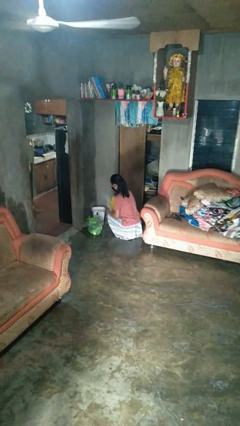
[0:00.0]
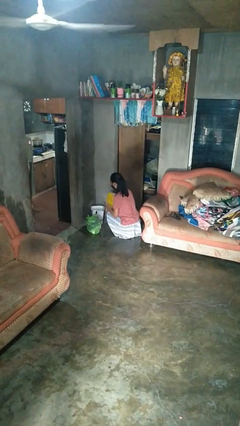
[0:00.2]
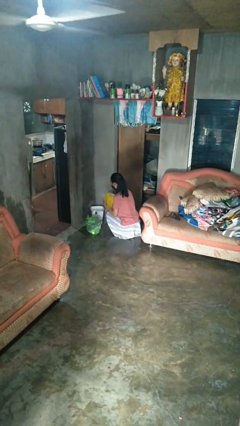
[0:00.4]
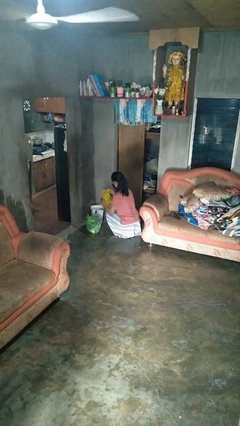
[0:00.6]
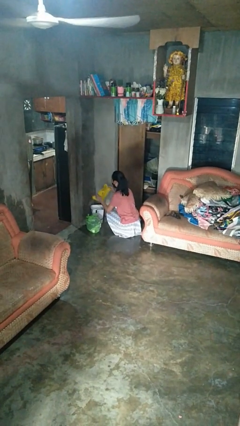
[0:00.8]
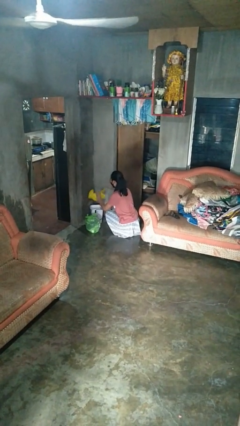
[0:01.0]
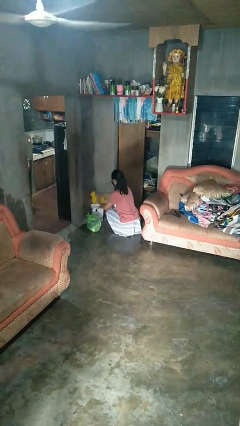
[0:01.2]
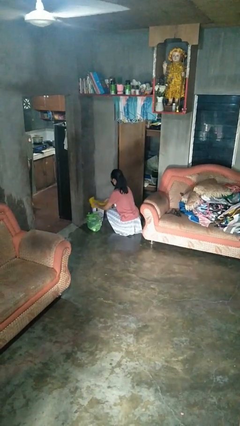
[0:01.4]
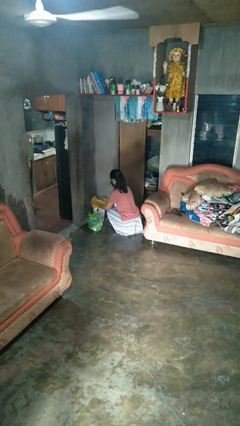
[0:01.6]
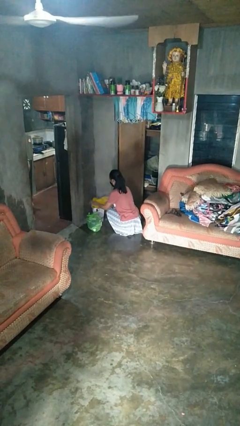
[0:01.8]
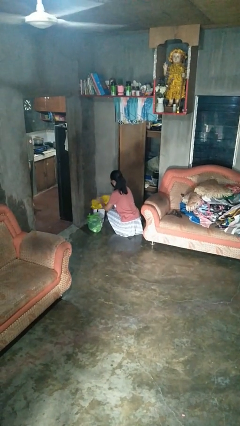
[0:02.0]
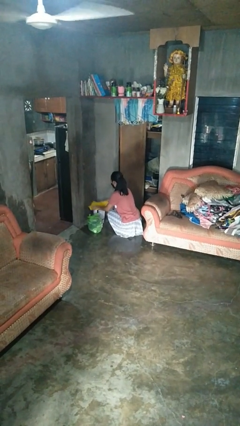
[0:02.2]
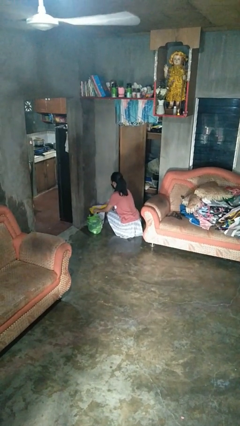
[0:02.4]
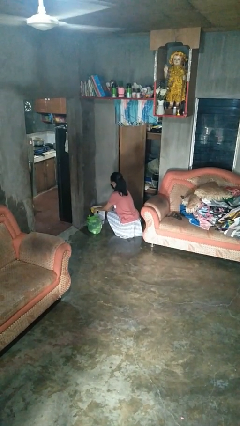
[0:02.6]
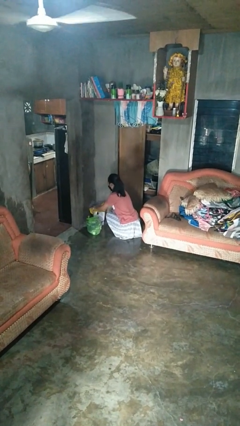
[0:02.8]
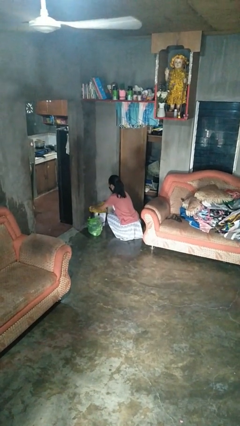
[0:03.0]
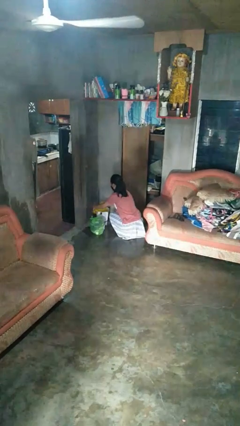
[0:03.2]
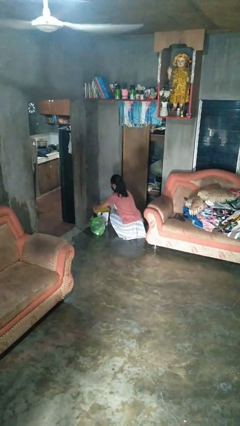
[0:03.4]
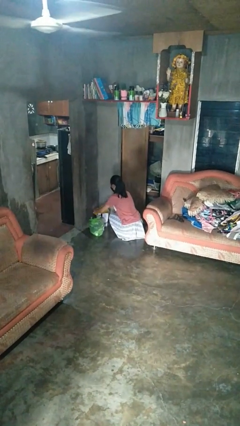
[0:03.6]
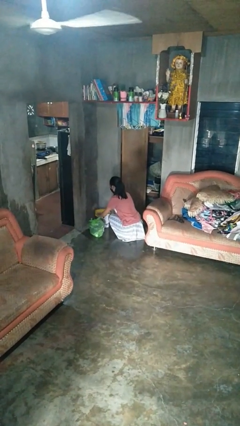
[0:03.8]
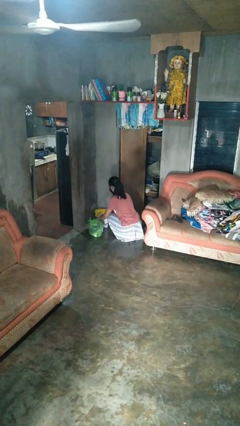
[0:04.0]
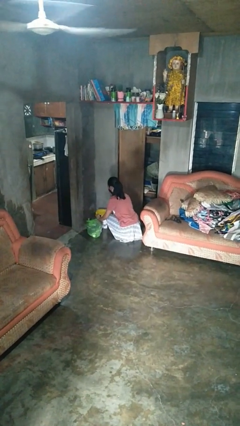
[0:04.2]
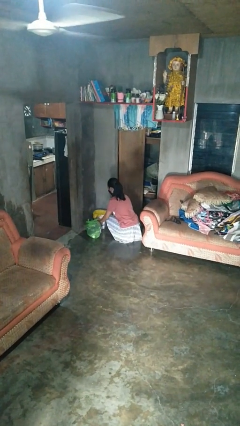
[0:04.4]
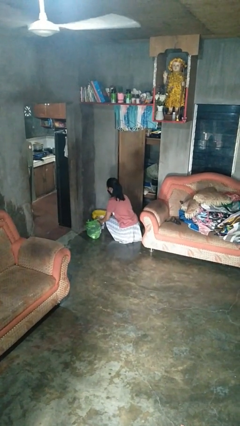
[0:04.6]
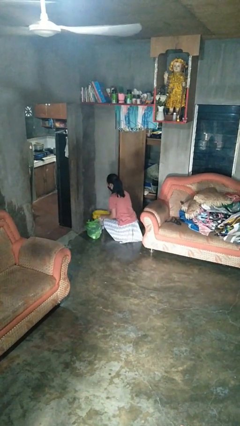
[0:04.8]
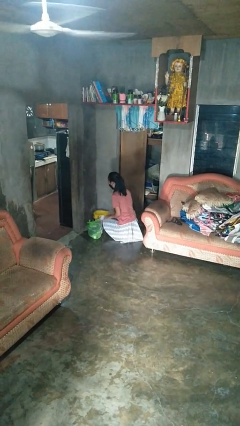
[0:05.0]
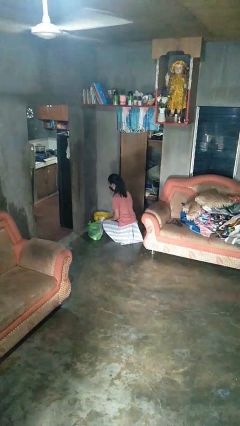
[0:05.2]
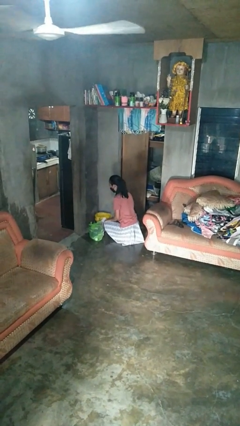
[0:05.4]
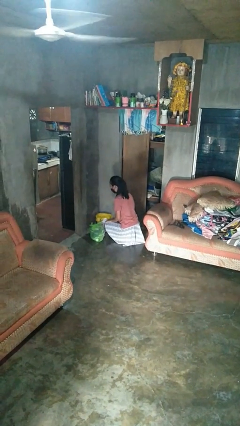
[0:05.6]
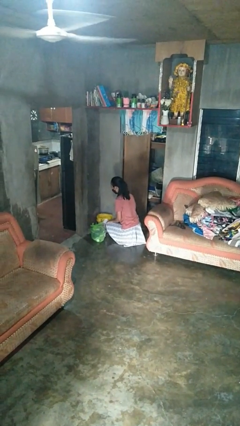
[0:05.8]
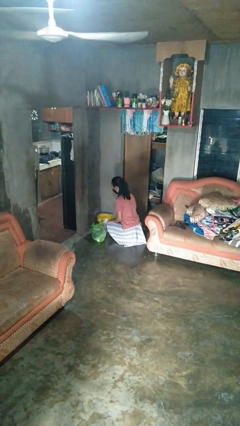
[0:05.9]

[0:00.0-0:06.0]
person inserts trashbag into trashcan

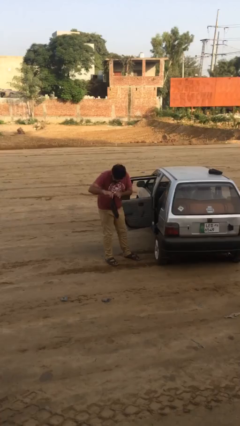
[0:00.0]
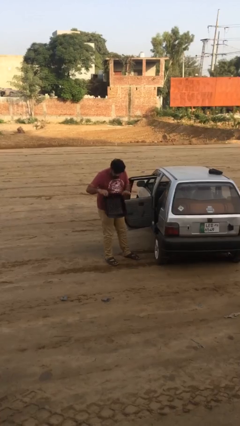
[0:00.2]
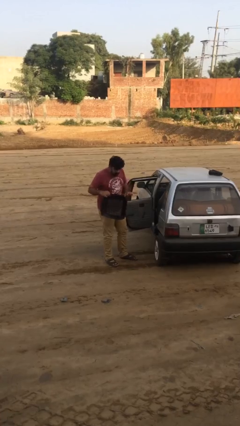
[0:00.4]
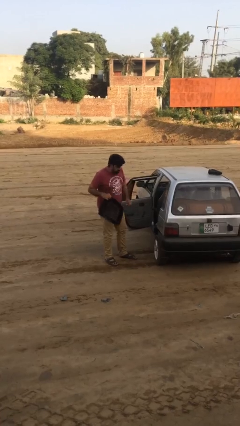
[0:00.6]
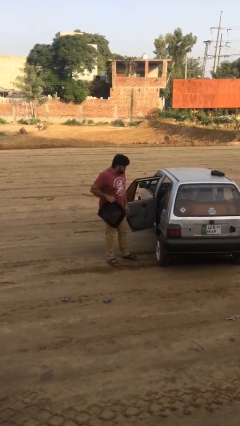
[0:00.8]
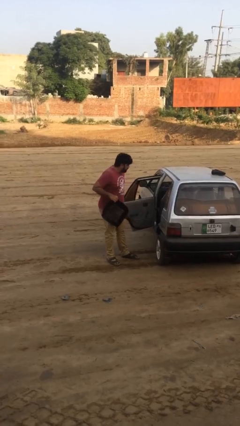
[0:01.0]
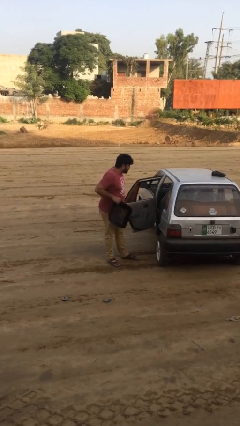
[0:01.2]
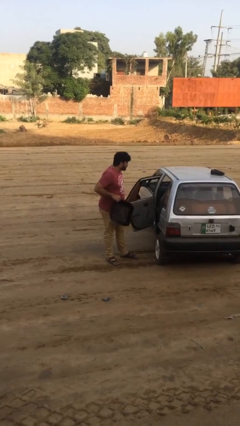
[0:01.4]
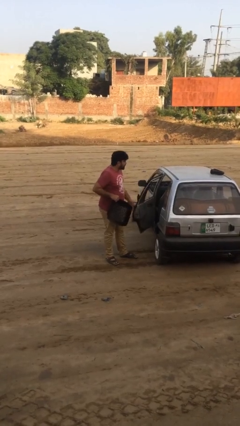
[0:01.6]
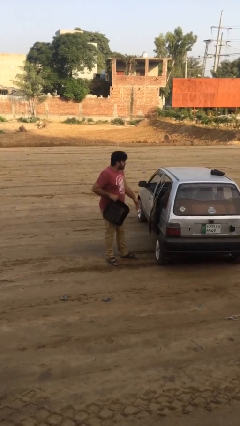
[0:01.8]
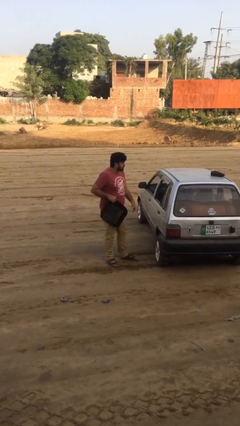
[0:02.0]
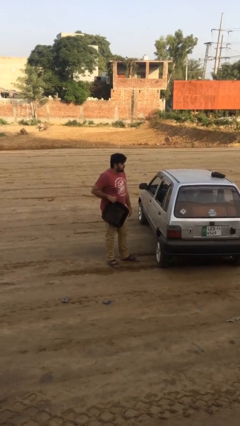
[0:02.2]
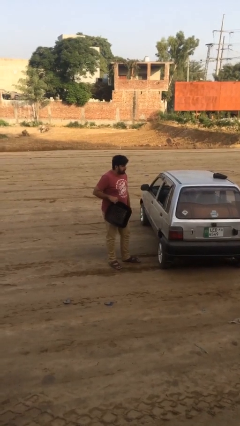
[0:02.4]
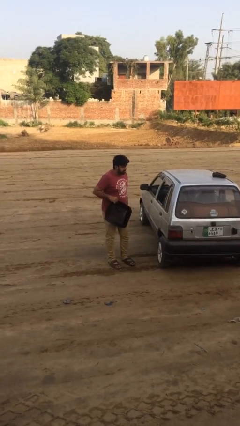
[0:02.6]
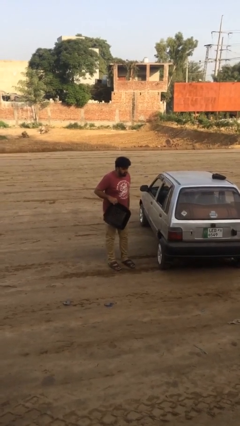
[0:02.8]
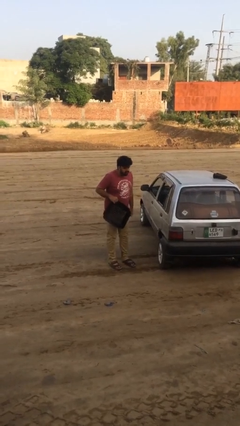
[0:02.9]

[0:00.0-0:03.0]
person closes car door

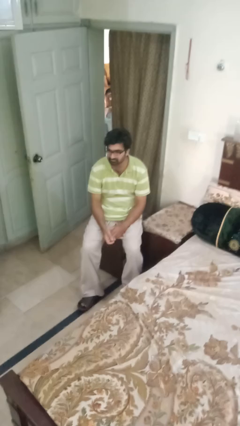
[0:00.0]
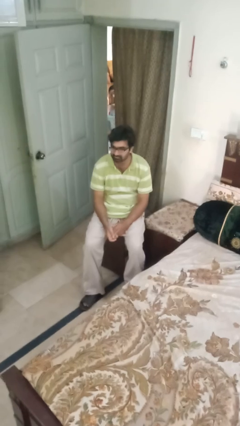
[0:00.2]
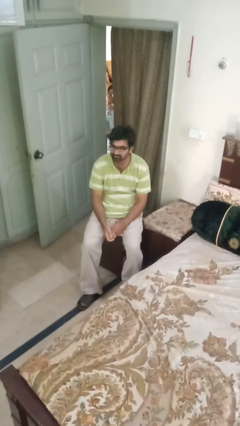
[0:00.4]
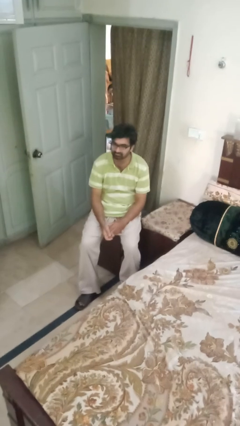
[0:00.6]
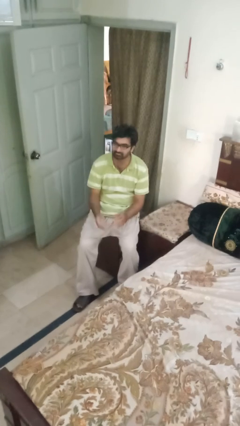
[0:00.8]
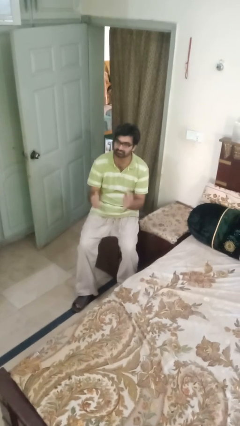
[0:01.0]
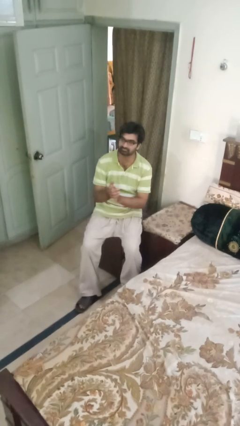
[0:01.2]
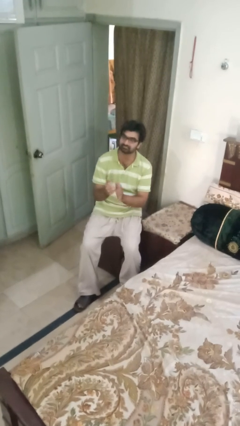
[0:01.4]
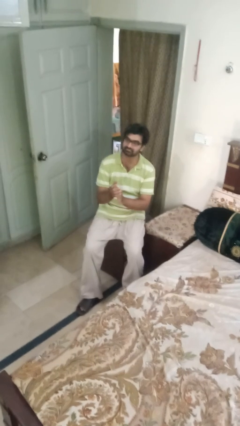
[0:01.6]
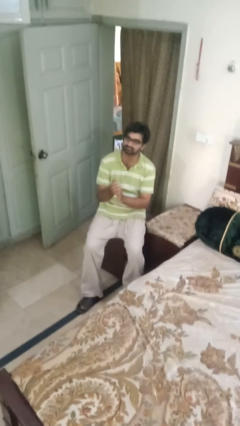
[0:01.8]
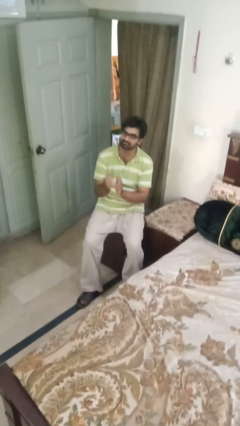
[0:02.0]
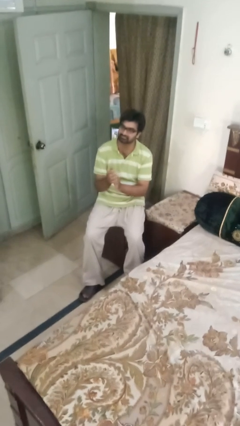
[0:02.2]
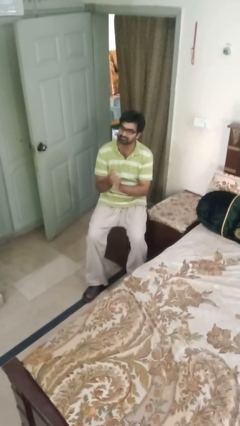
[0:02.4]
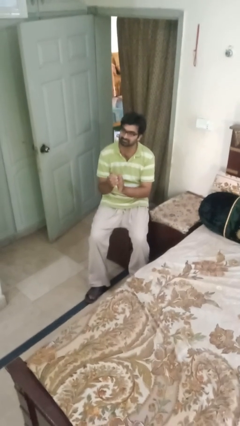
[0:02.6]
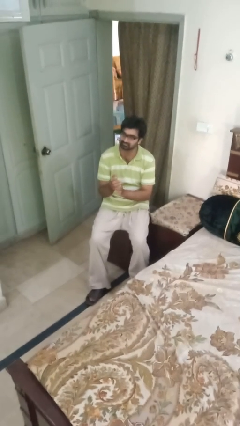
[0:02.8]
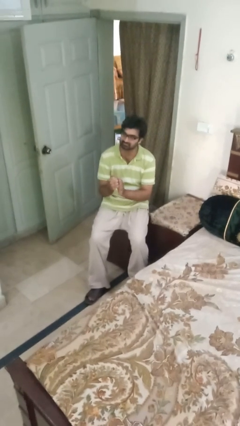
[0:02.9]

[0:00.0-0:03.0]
person claps hands

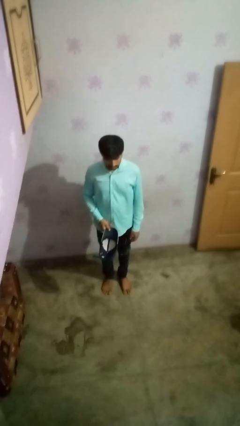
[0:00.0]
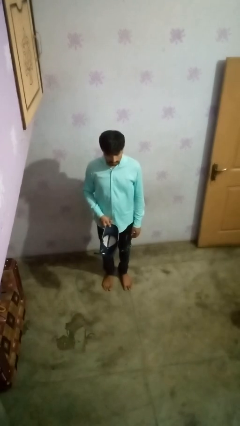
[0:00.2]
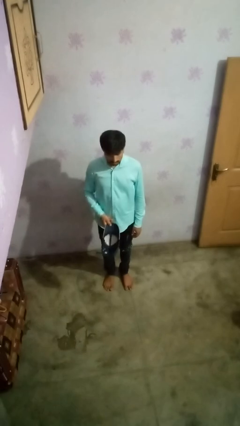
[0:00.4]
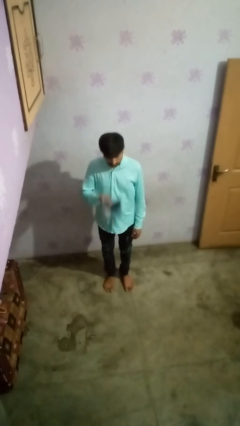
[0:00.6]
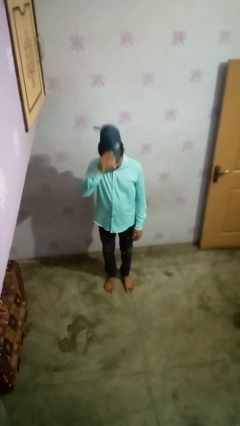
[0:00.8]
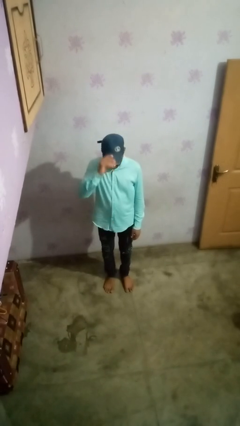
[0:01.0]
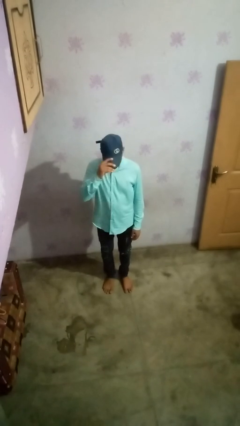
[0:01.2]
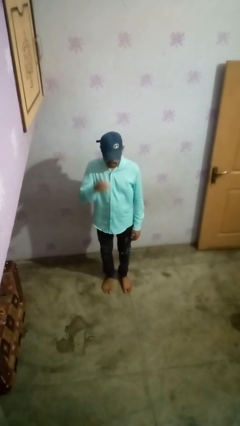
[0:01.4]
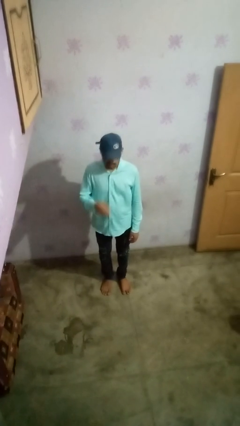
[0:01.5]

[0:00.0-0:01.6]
person puts on hat

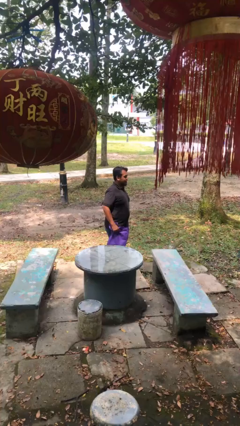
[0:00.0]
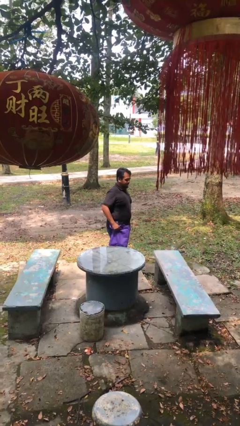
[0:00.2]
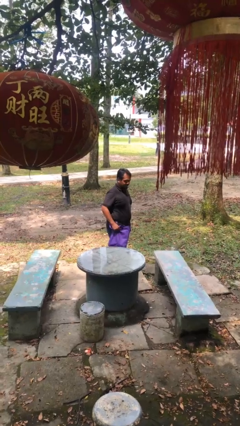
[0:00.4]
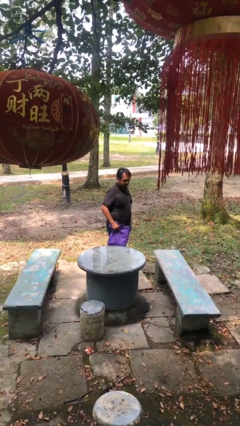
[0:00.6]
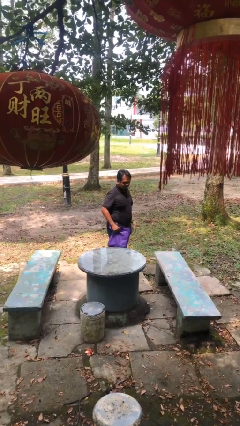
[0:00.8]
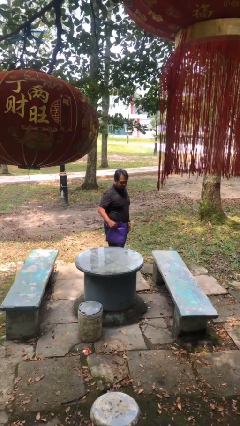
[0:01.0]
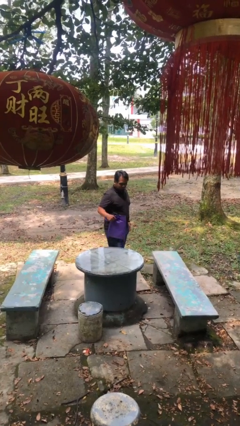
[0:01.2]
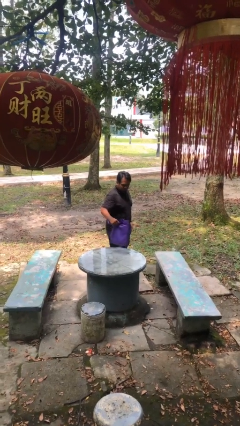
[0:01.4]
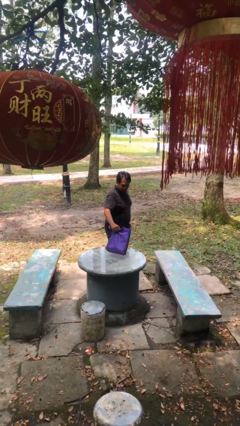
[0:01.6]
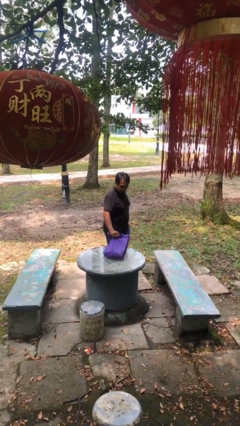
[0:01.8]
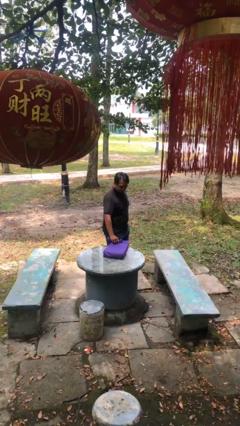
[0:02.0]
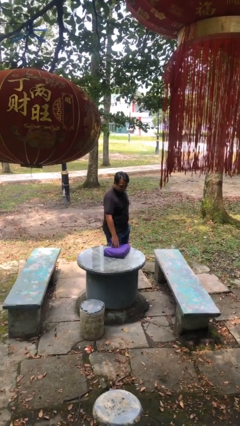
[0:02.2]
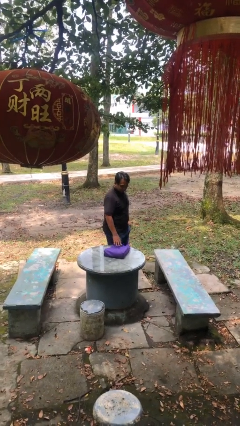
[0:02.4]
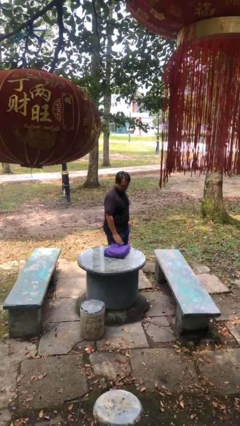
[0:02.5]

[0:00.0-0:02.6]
person puts down object on table

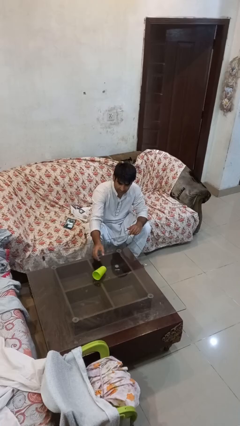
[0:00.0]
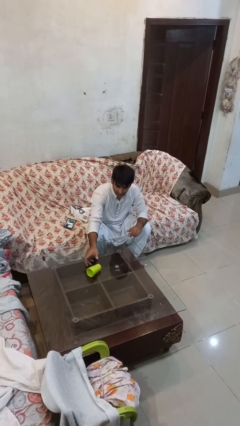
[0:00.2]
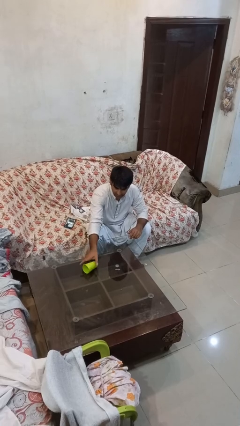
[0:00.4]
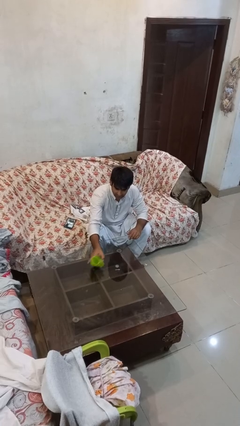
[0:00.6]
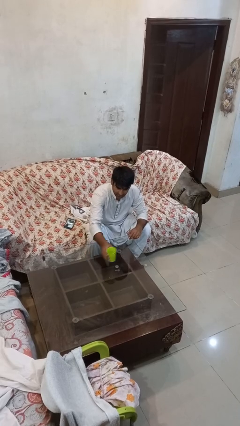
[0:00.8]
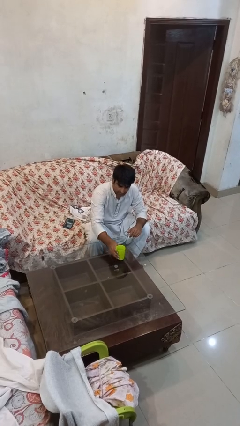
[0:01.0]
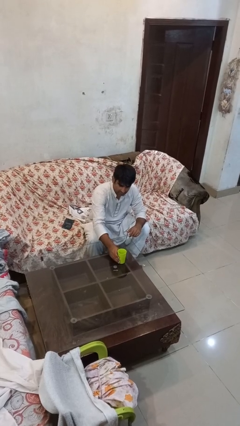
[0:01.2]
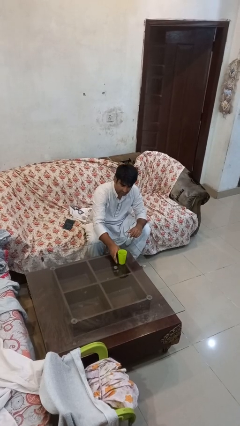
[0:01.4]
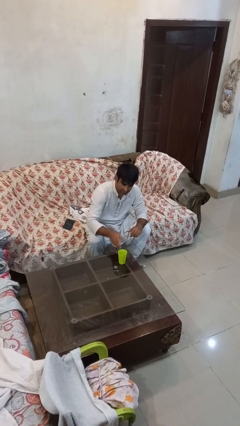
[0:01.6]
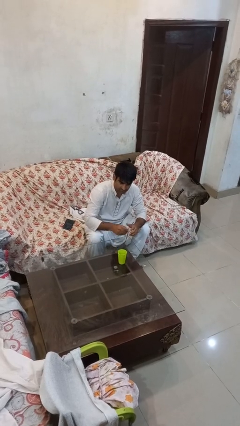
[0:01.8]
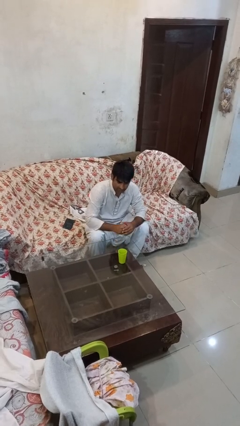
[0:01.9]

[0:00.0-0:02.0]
person sets upright glass
